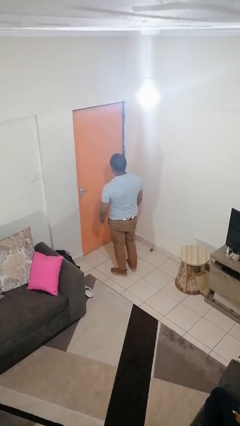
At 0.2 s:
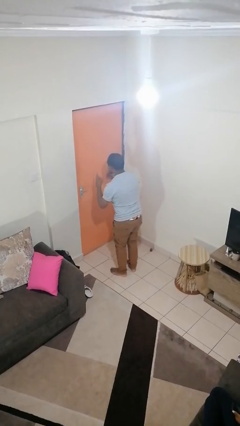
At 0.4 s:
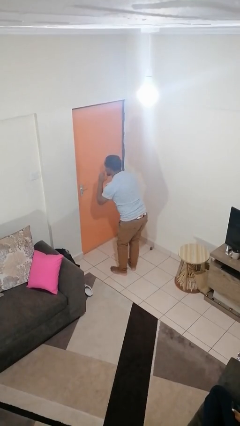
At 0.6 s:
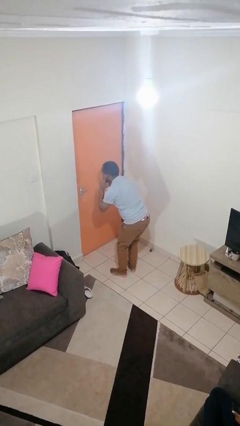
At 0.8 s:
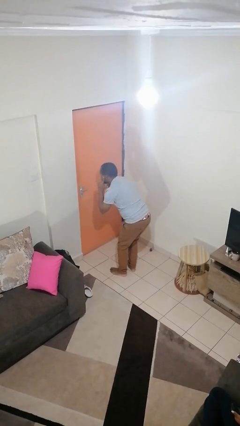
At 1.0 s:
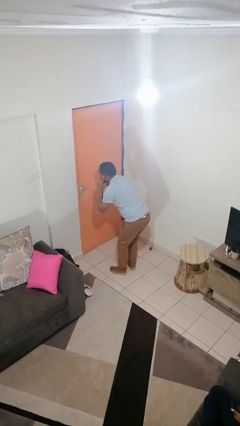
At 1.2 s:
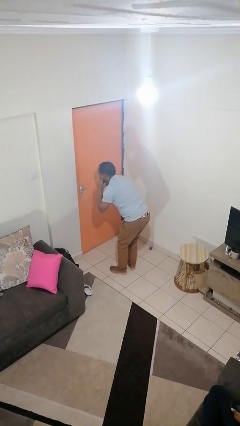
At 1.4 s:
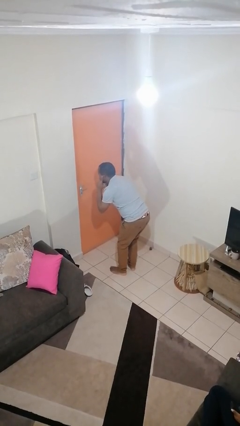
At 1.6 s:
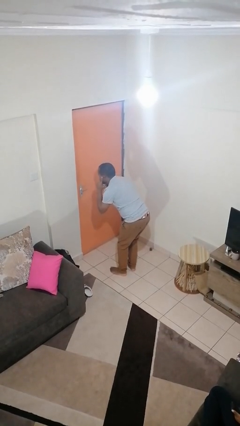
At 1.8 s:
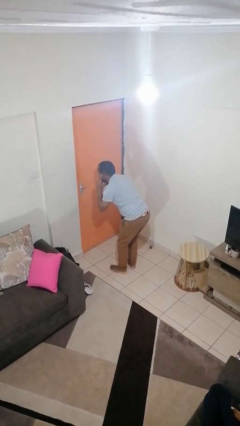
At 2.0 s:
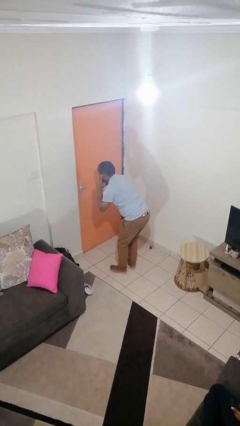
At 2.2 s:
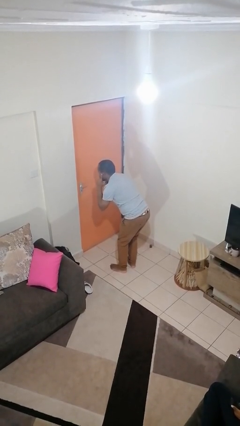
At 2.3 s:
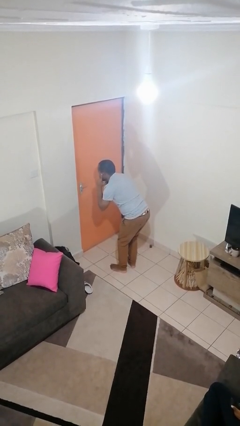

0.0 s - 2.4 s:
person gestures listen closely

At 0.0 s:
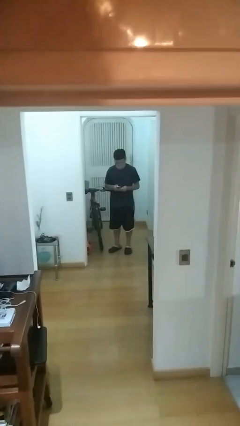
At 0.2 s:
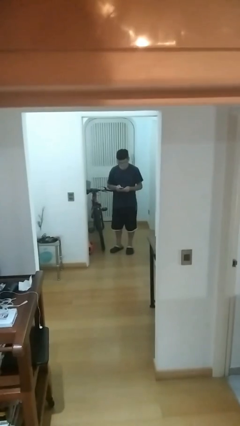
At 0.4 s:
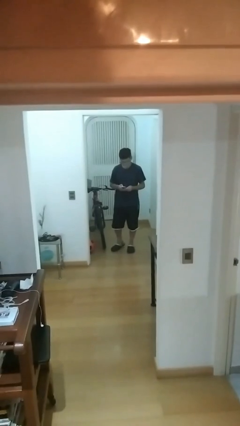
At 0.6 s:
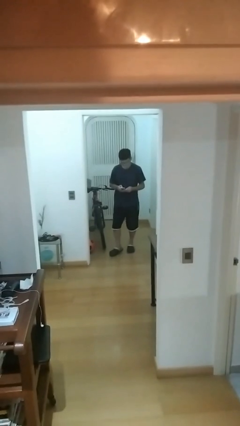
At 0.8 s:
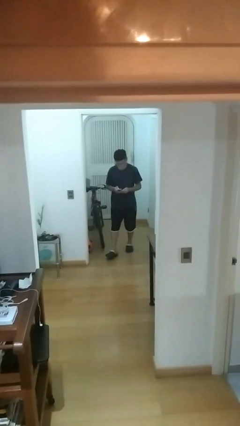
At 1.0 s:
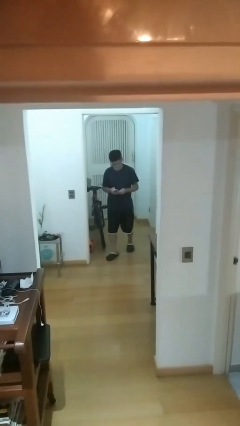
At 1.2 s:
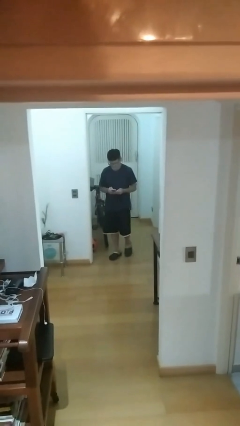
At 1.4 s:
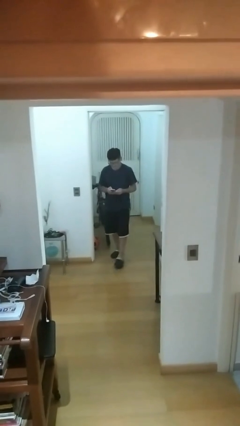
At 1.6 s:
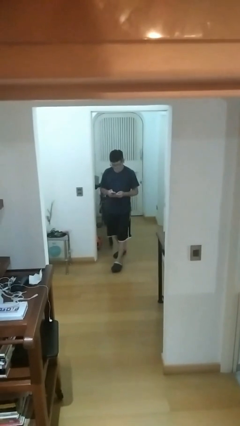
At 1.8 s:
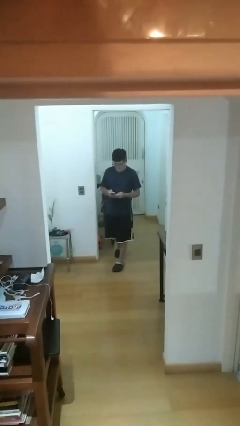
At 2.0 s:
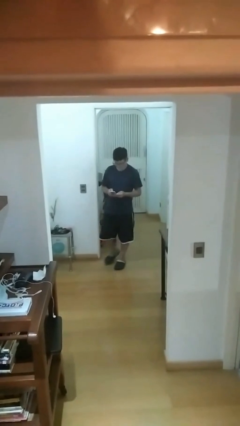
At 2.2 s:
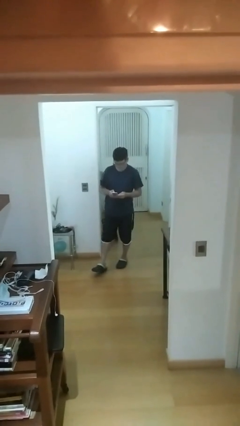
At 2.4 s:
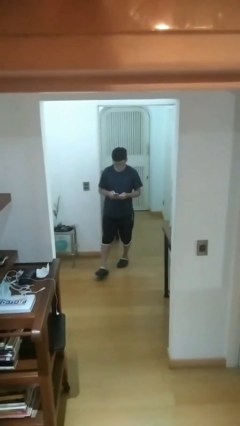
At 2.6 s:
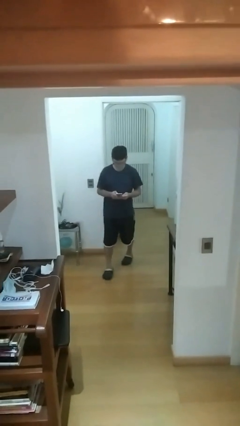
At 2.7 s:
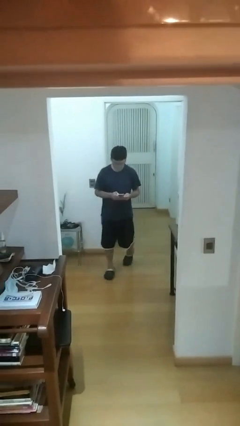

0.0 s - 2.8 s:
person enters scene through structure

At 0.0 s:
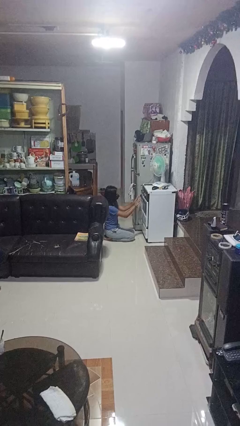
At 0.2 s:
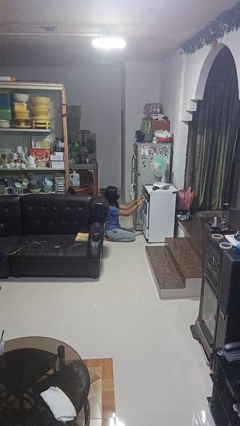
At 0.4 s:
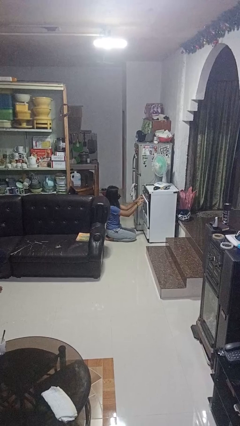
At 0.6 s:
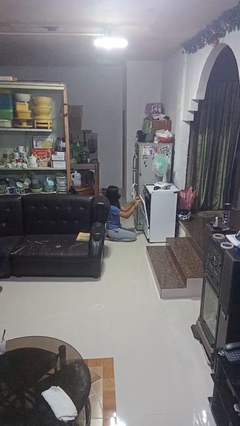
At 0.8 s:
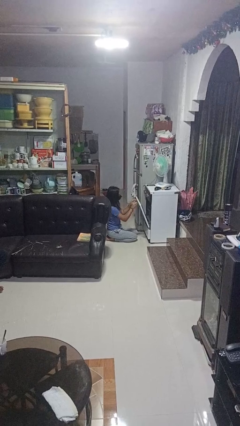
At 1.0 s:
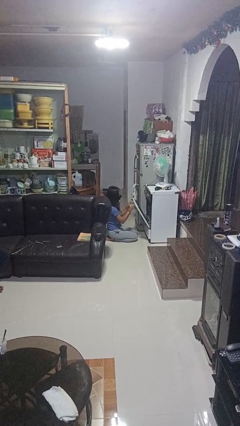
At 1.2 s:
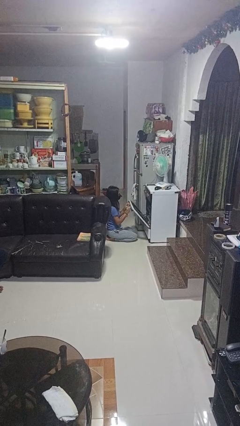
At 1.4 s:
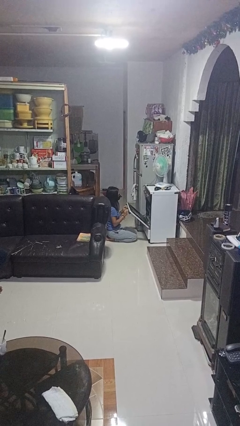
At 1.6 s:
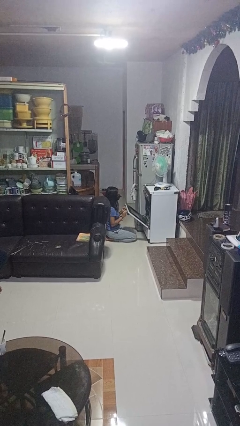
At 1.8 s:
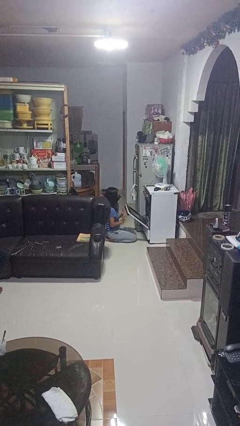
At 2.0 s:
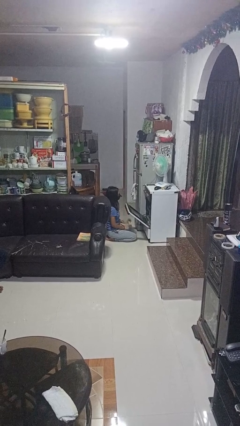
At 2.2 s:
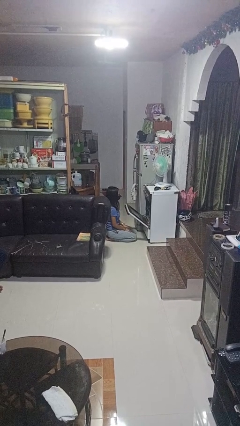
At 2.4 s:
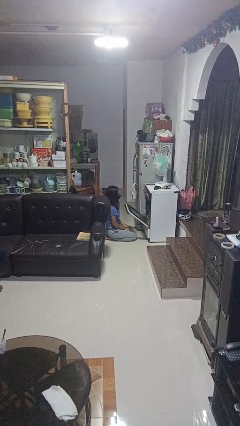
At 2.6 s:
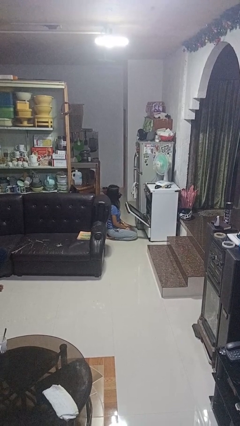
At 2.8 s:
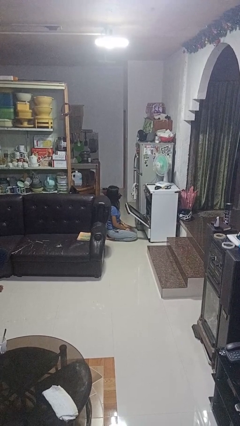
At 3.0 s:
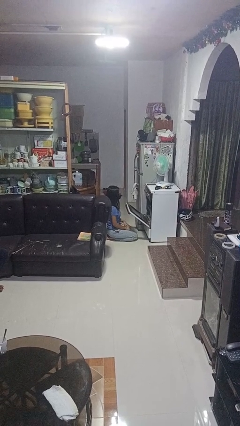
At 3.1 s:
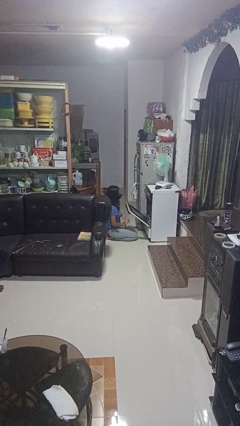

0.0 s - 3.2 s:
person opens oven door

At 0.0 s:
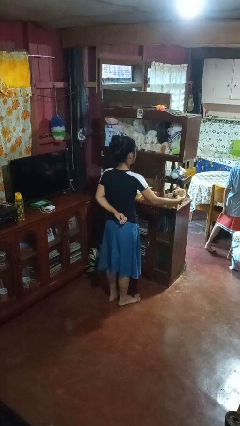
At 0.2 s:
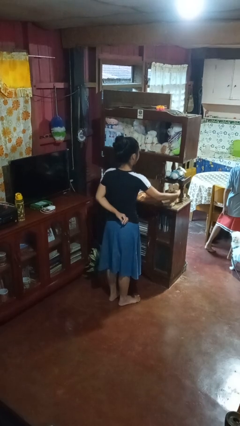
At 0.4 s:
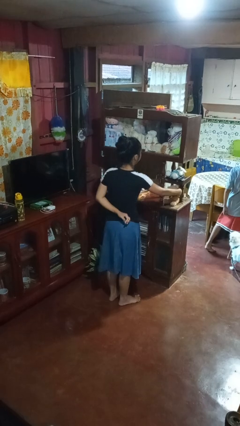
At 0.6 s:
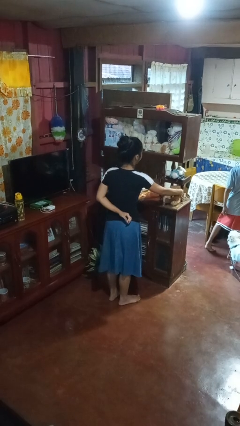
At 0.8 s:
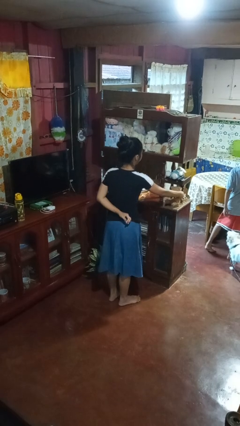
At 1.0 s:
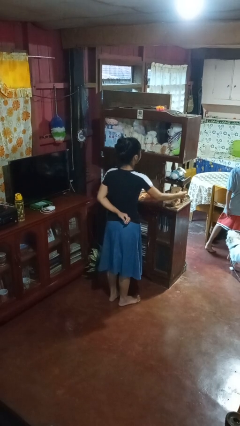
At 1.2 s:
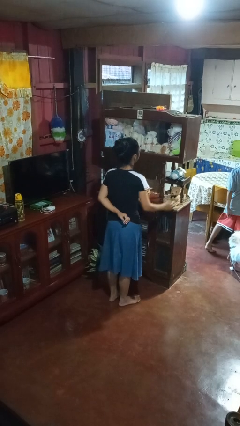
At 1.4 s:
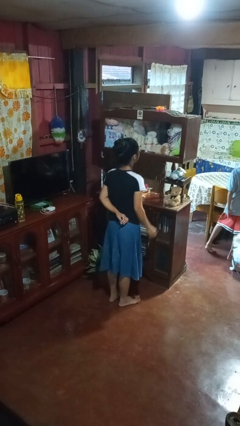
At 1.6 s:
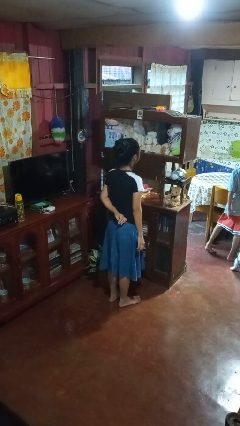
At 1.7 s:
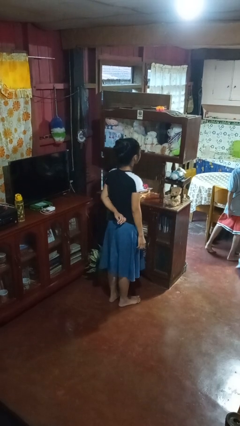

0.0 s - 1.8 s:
person puts down object on shelf

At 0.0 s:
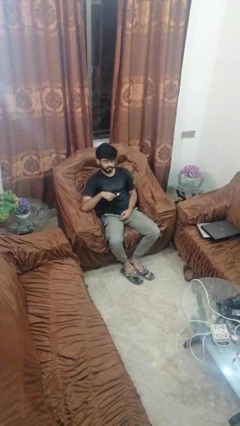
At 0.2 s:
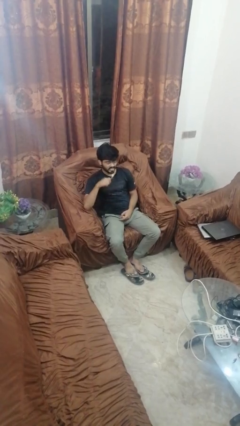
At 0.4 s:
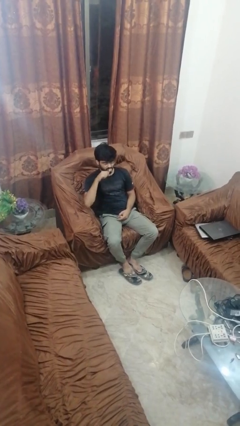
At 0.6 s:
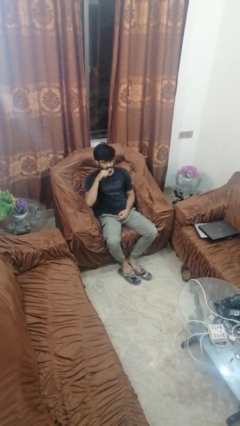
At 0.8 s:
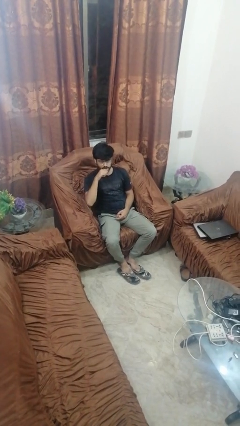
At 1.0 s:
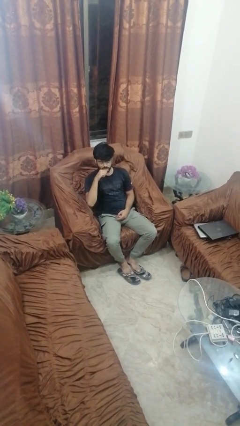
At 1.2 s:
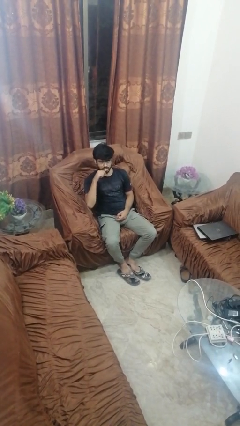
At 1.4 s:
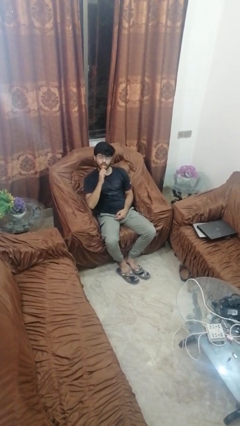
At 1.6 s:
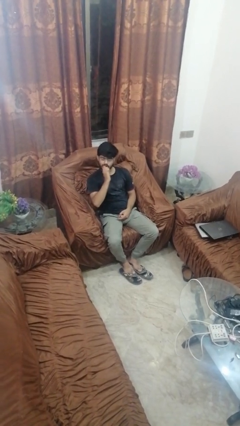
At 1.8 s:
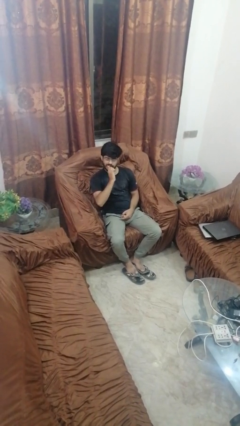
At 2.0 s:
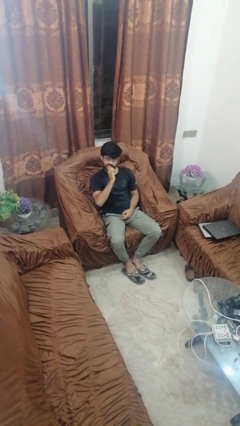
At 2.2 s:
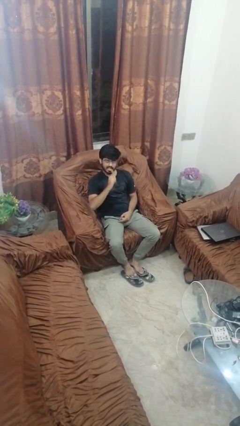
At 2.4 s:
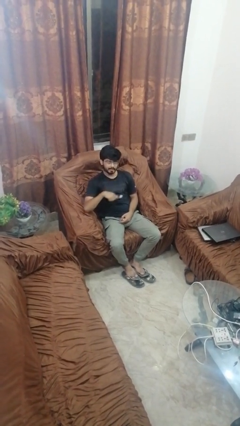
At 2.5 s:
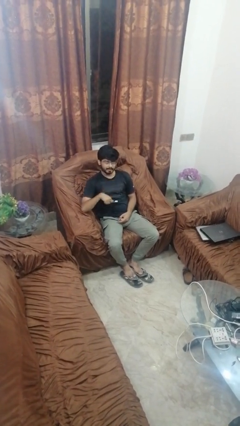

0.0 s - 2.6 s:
person brushes teeth

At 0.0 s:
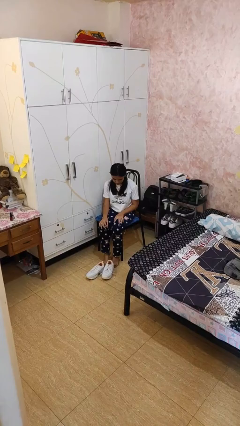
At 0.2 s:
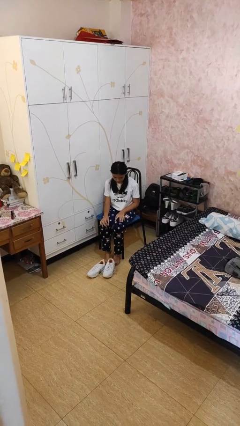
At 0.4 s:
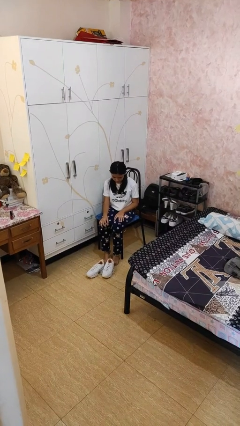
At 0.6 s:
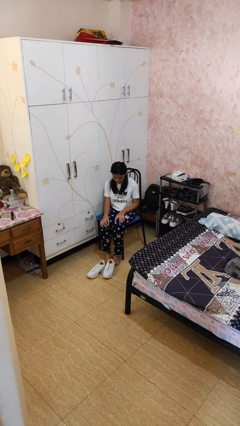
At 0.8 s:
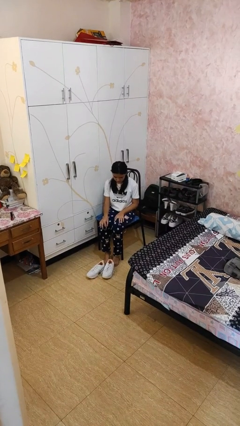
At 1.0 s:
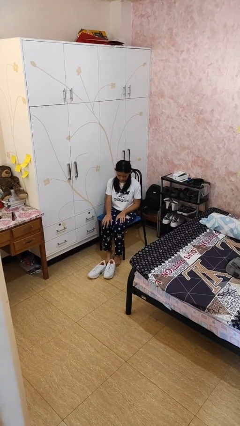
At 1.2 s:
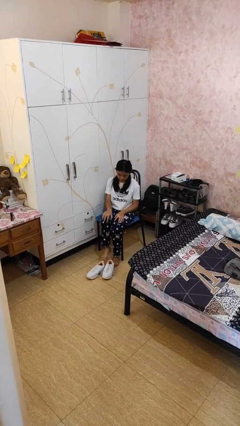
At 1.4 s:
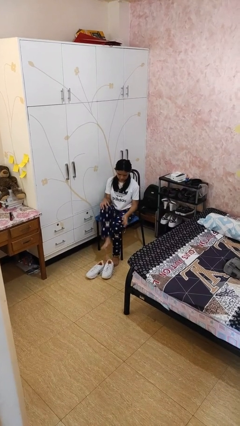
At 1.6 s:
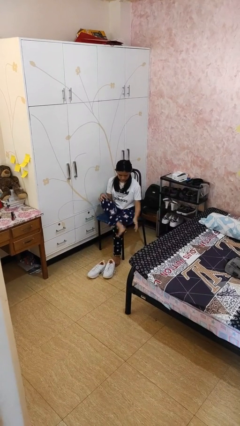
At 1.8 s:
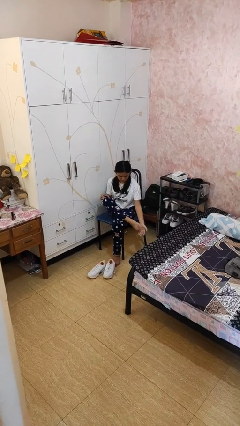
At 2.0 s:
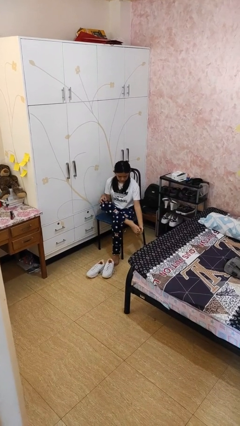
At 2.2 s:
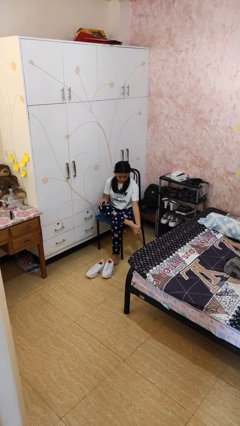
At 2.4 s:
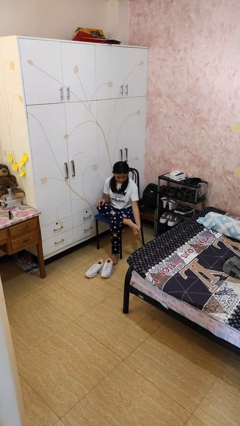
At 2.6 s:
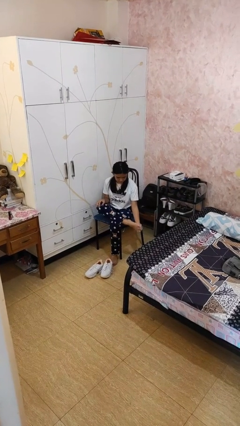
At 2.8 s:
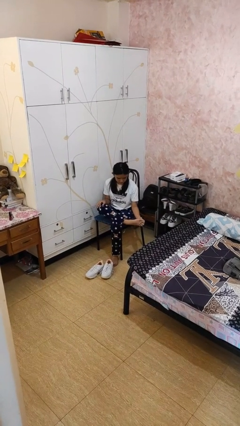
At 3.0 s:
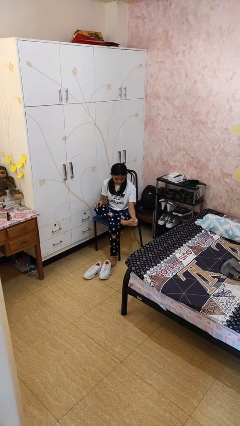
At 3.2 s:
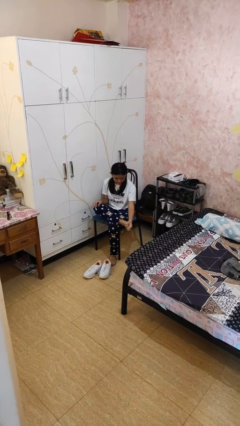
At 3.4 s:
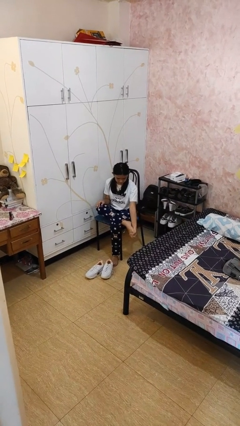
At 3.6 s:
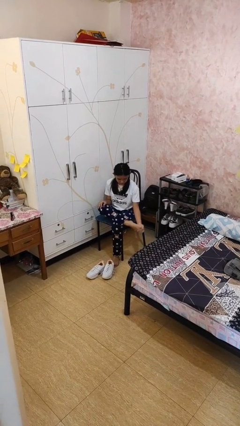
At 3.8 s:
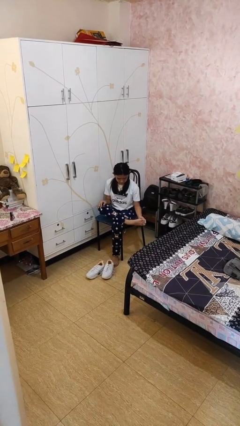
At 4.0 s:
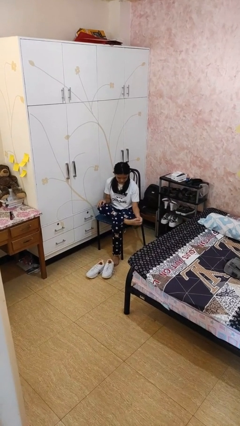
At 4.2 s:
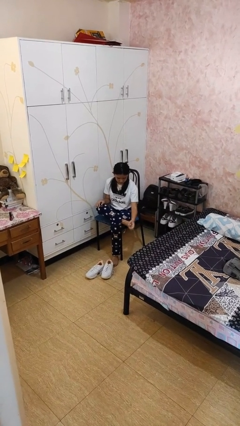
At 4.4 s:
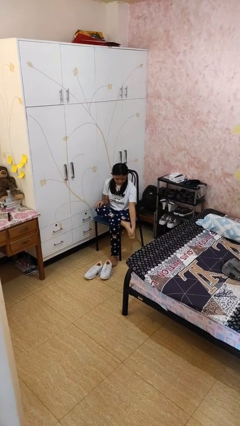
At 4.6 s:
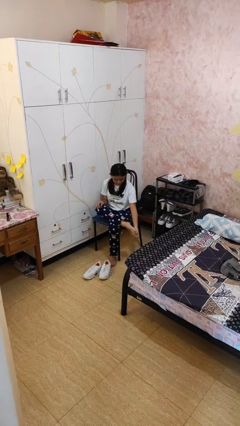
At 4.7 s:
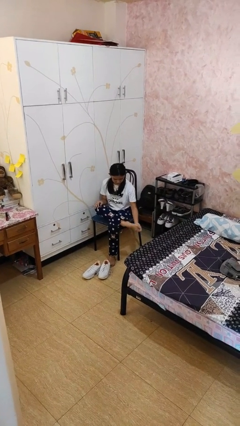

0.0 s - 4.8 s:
person rubs foot
